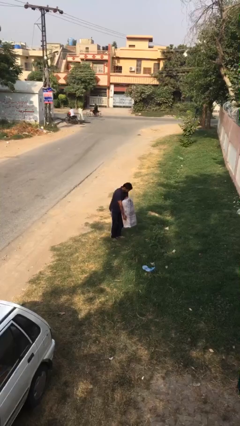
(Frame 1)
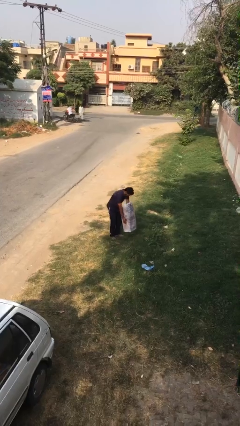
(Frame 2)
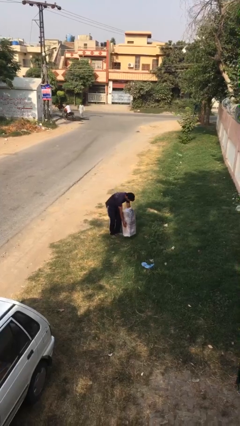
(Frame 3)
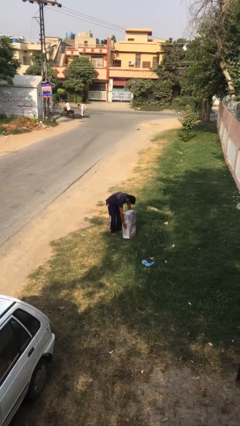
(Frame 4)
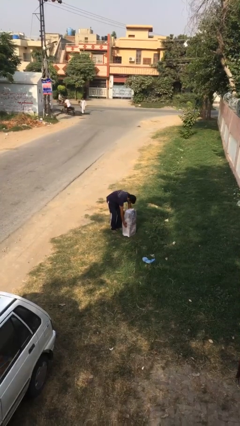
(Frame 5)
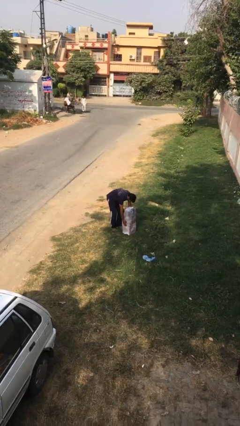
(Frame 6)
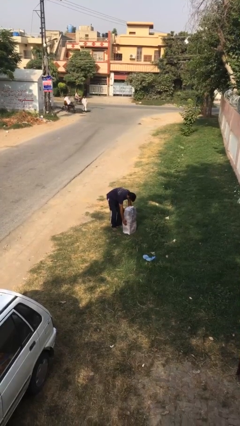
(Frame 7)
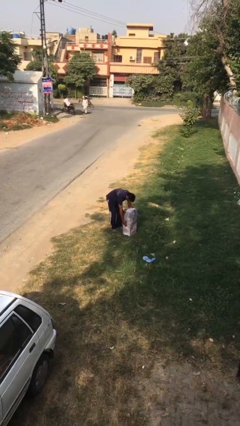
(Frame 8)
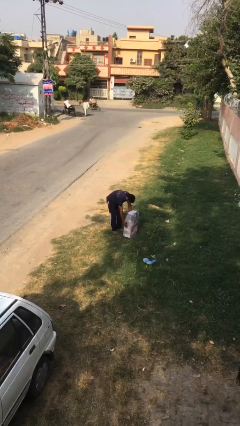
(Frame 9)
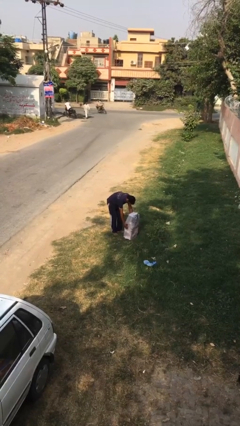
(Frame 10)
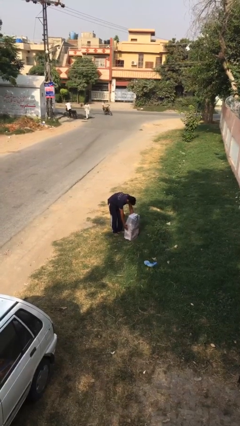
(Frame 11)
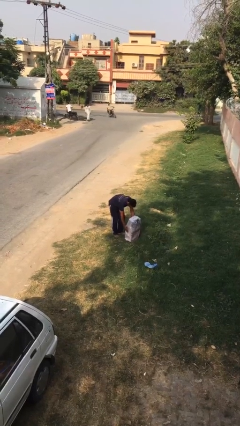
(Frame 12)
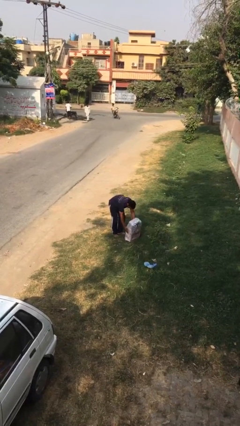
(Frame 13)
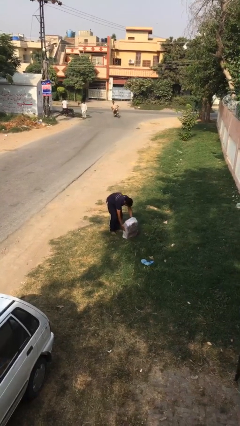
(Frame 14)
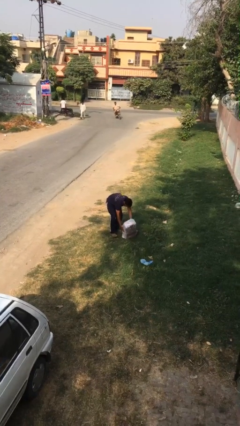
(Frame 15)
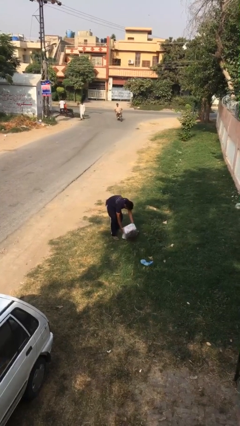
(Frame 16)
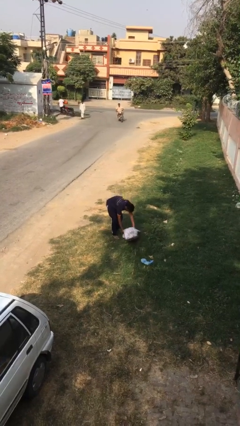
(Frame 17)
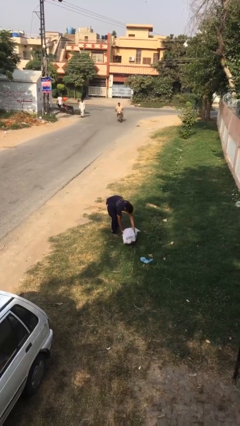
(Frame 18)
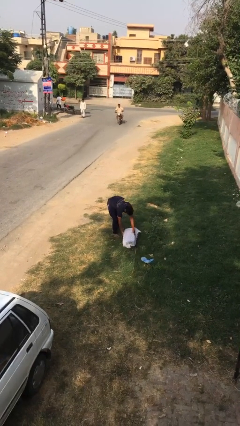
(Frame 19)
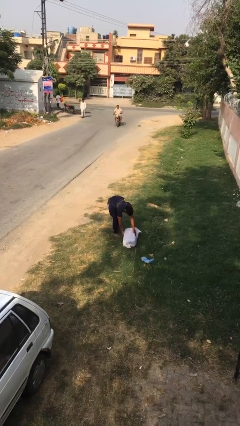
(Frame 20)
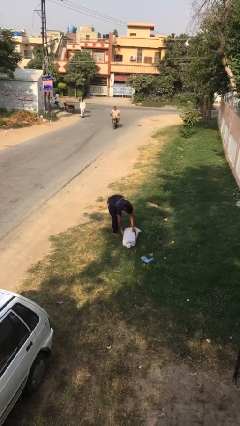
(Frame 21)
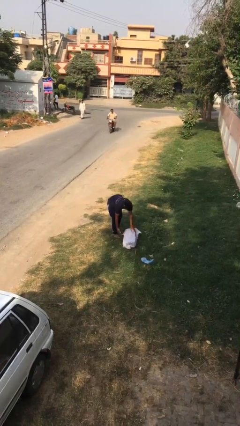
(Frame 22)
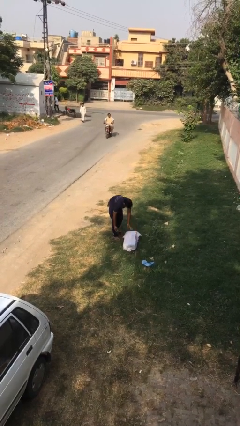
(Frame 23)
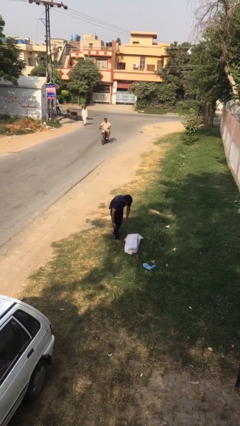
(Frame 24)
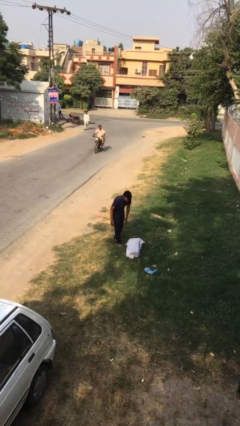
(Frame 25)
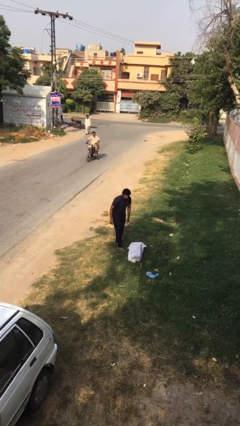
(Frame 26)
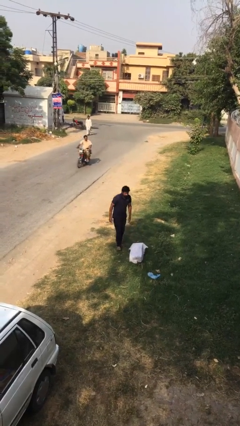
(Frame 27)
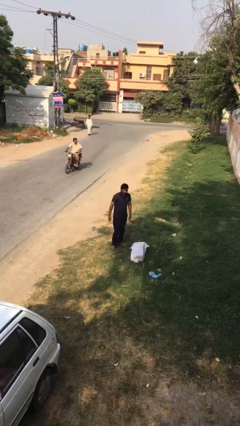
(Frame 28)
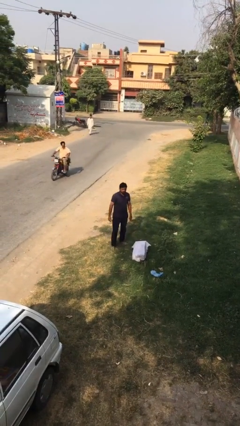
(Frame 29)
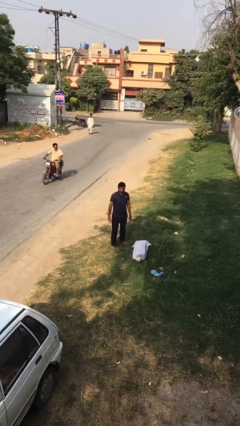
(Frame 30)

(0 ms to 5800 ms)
person puts down object on floor

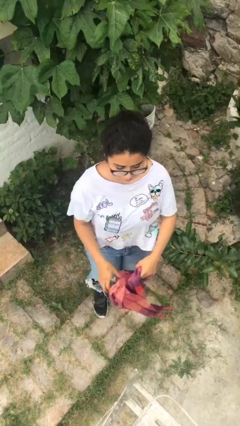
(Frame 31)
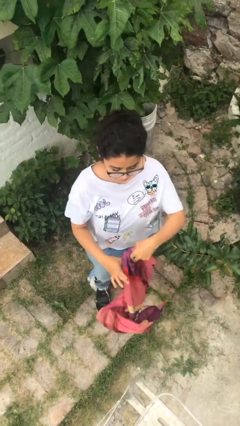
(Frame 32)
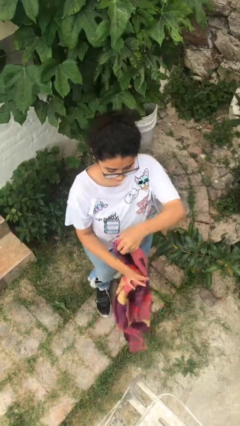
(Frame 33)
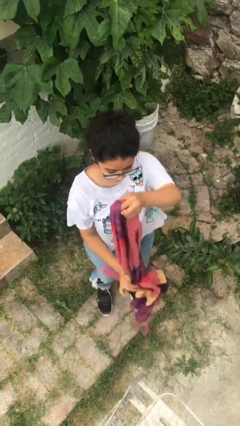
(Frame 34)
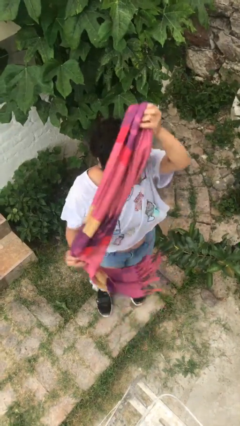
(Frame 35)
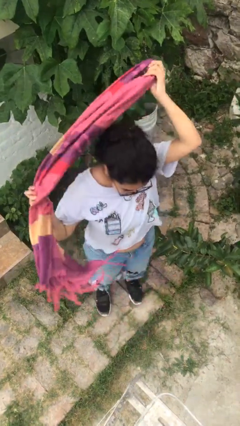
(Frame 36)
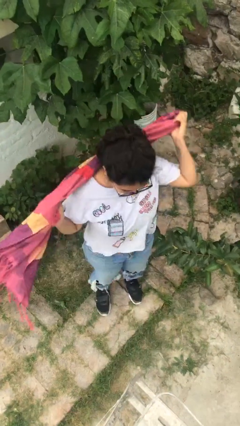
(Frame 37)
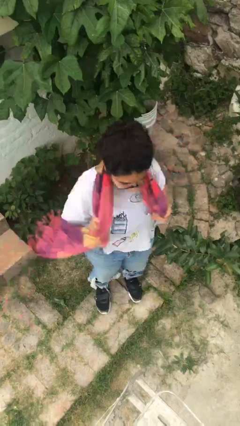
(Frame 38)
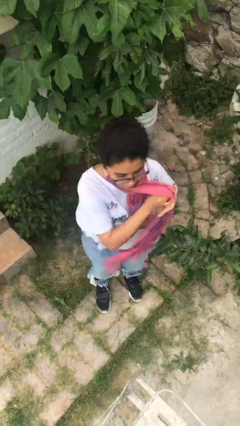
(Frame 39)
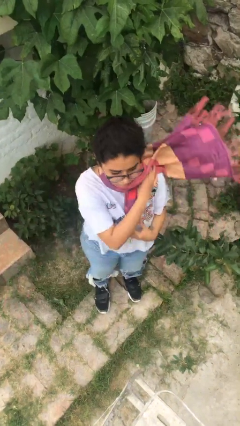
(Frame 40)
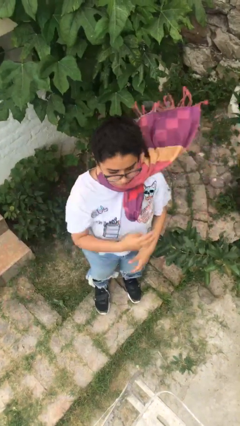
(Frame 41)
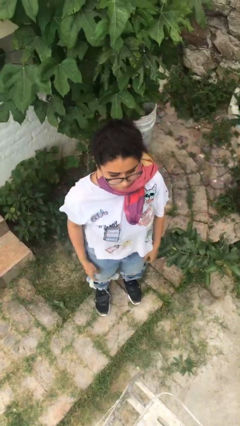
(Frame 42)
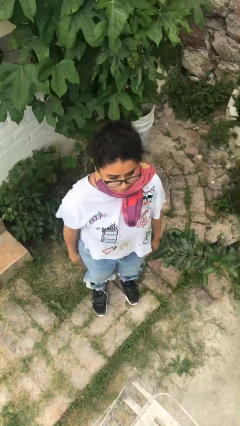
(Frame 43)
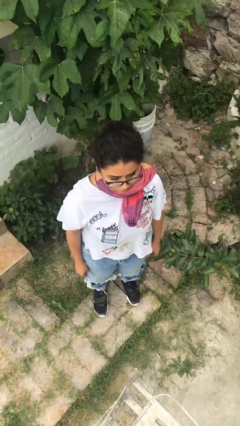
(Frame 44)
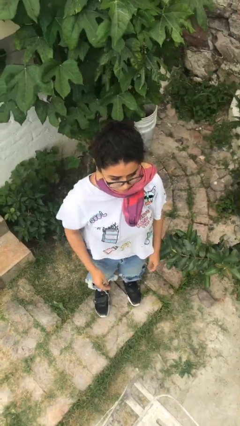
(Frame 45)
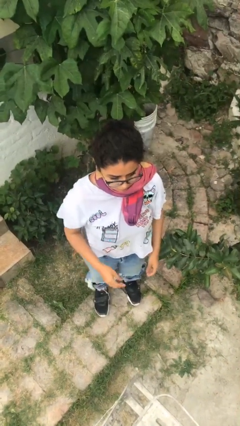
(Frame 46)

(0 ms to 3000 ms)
person puts on scarf

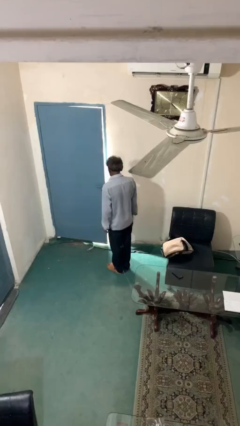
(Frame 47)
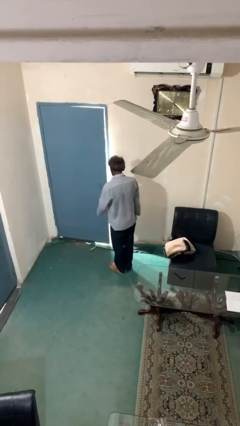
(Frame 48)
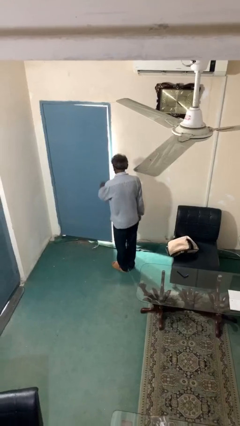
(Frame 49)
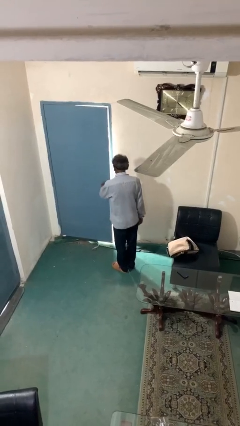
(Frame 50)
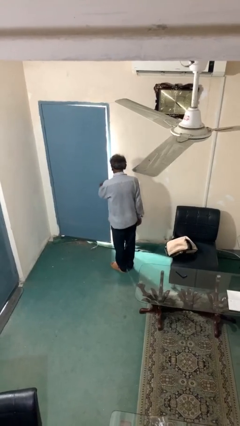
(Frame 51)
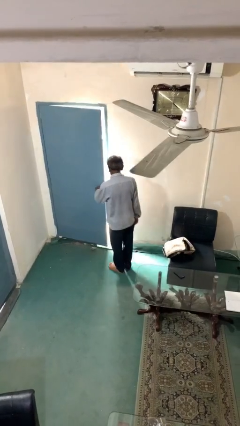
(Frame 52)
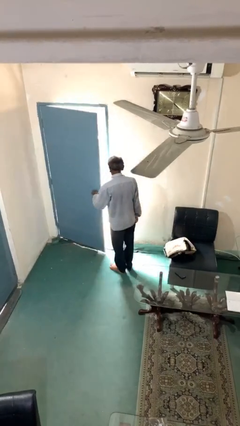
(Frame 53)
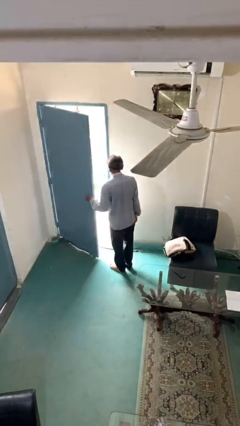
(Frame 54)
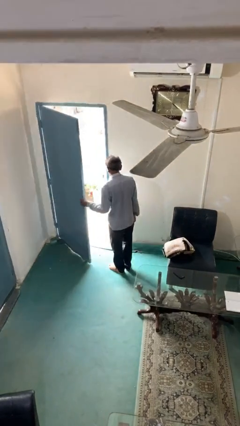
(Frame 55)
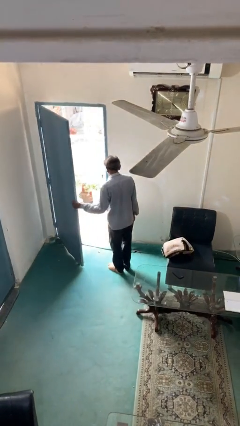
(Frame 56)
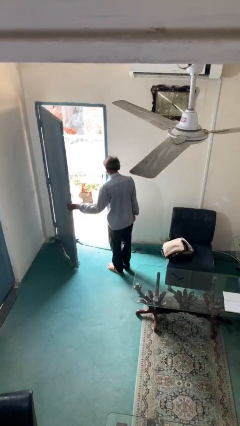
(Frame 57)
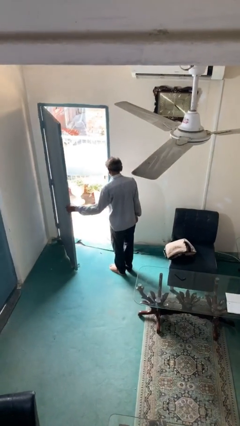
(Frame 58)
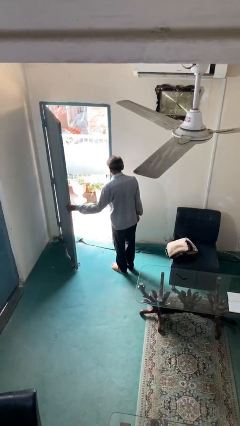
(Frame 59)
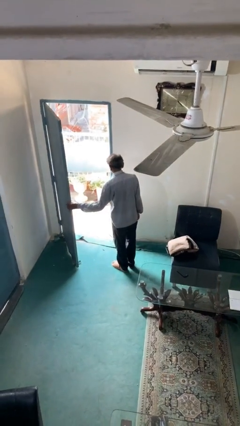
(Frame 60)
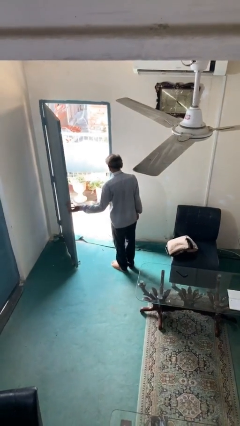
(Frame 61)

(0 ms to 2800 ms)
person opens facility door

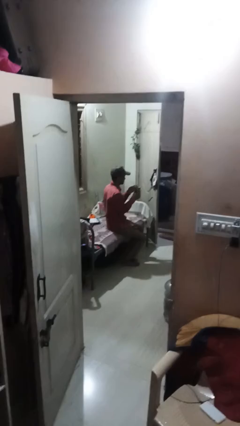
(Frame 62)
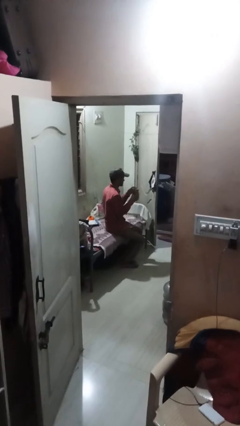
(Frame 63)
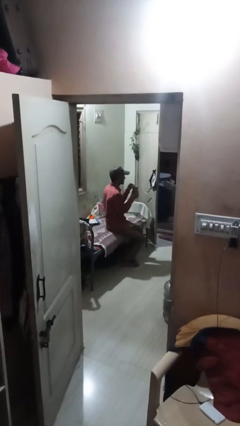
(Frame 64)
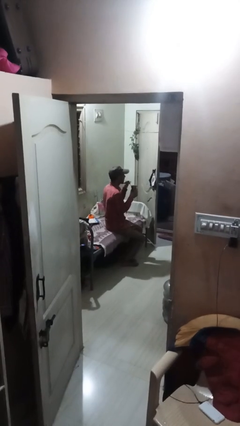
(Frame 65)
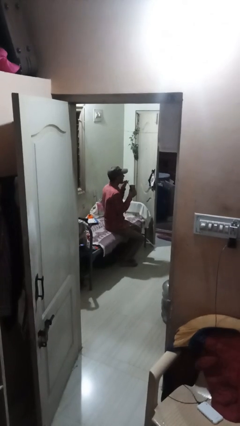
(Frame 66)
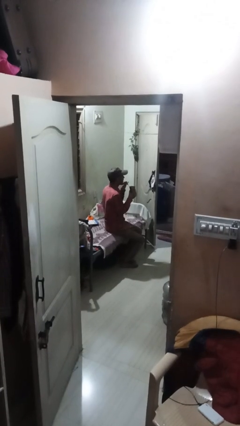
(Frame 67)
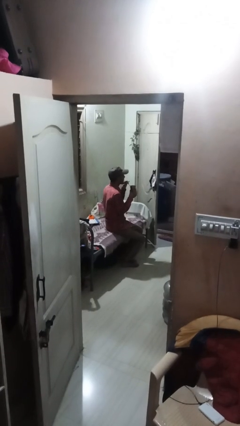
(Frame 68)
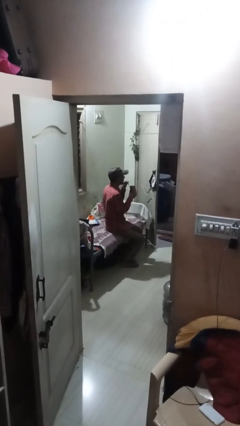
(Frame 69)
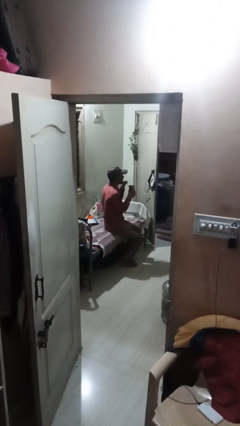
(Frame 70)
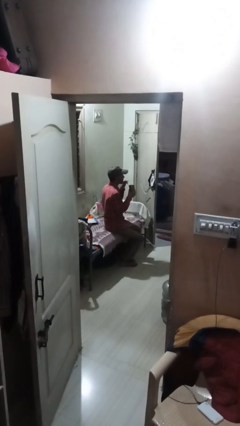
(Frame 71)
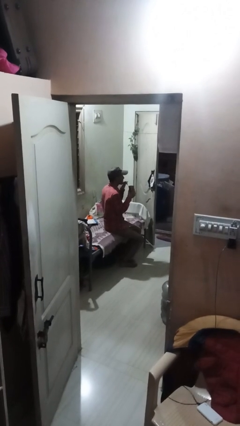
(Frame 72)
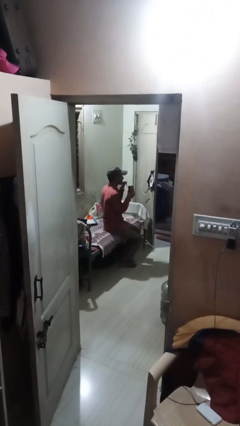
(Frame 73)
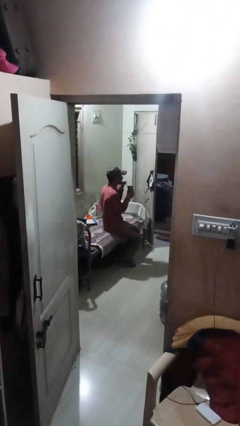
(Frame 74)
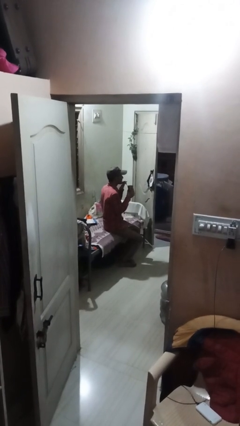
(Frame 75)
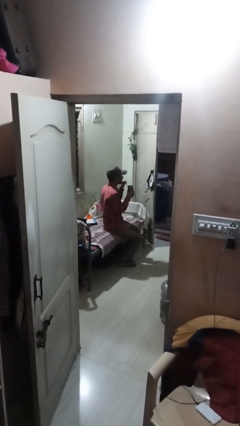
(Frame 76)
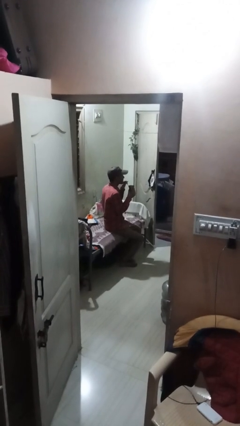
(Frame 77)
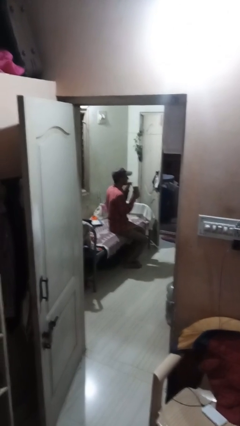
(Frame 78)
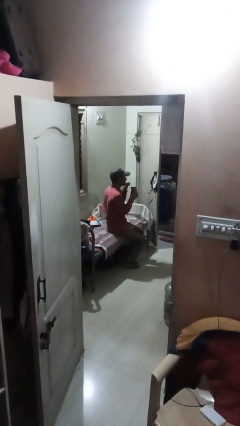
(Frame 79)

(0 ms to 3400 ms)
person drinks from straw

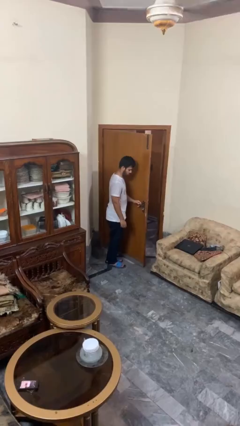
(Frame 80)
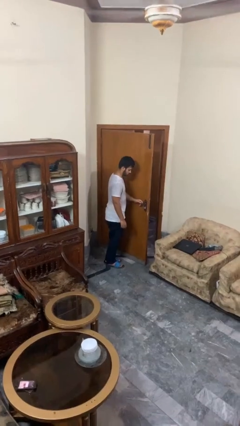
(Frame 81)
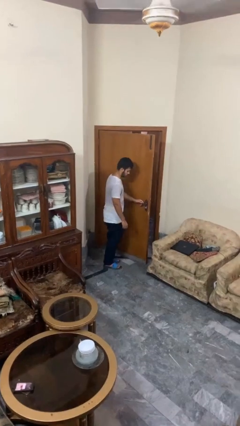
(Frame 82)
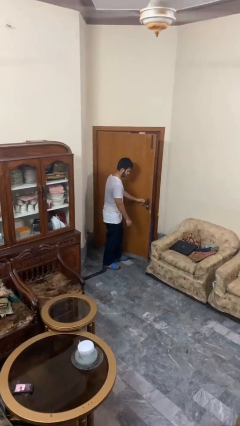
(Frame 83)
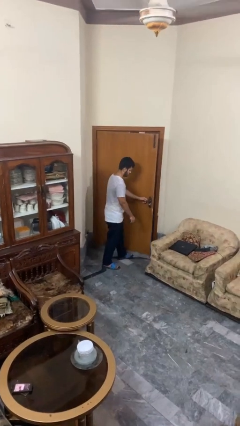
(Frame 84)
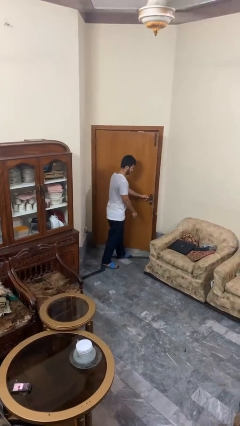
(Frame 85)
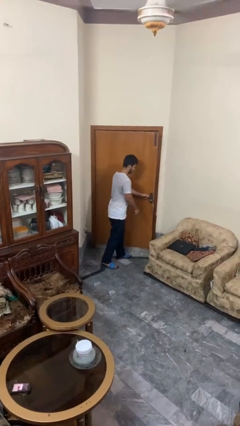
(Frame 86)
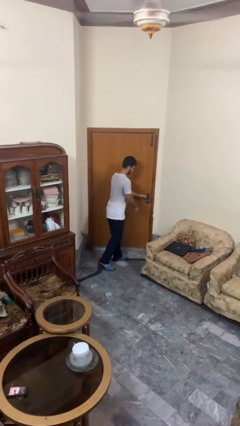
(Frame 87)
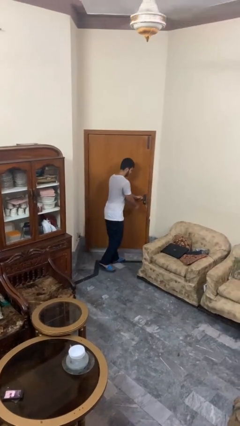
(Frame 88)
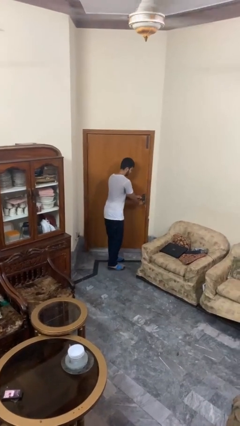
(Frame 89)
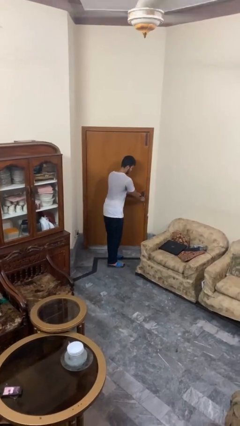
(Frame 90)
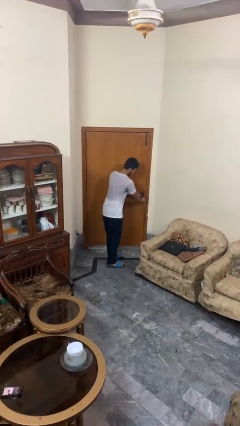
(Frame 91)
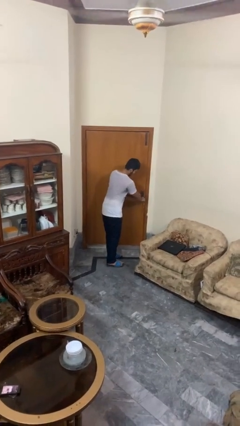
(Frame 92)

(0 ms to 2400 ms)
person closes facility door
